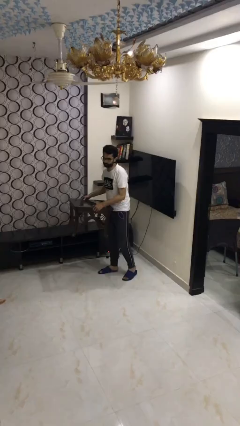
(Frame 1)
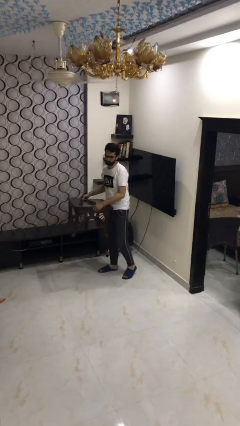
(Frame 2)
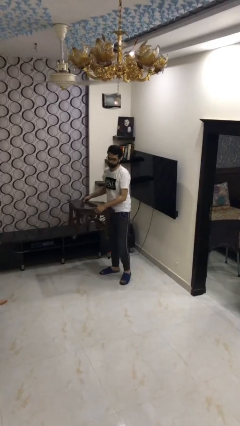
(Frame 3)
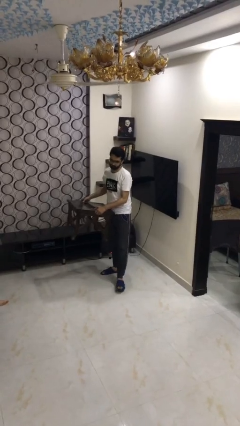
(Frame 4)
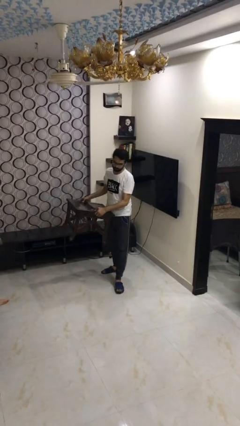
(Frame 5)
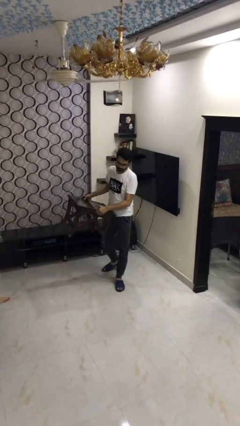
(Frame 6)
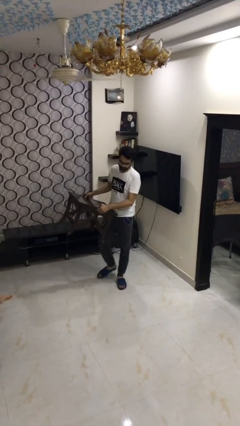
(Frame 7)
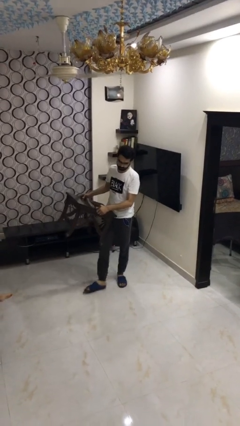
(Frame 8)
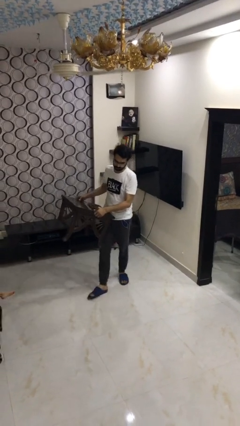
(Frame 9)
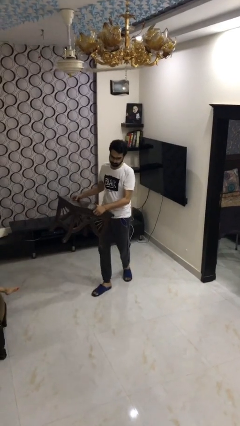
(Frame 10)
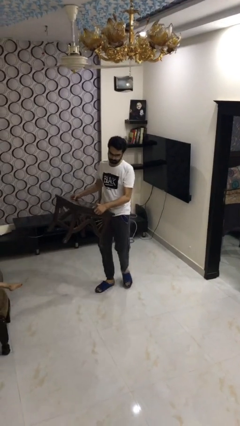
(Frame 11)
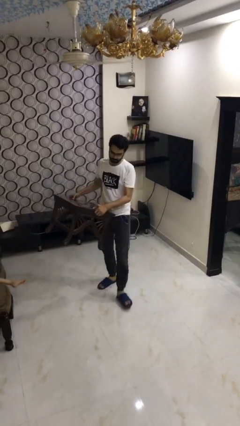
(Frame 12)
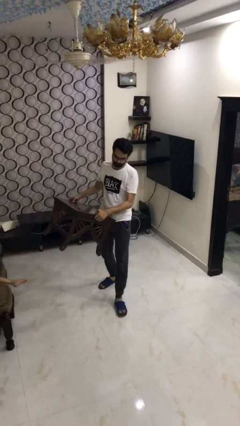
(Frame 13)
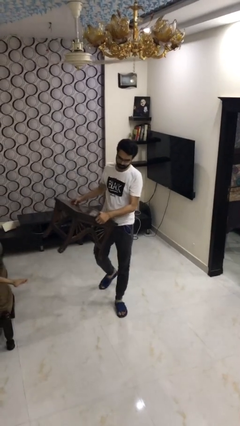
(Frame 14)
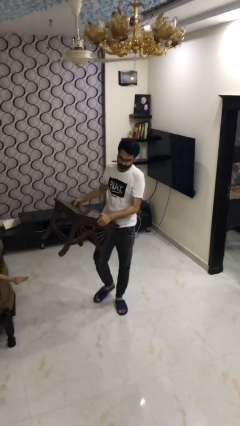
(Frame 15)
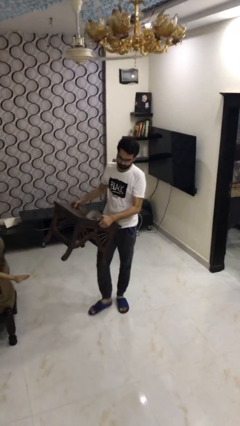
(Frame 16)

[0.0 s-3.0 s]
person carries heavy object

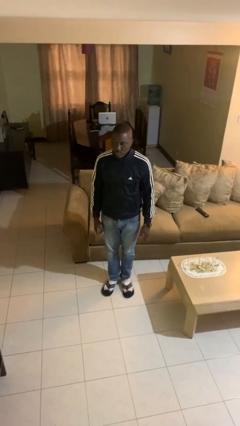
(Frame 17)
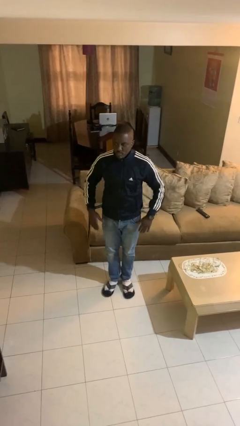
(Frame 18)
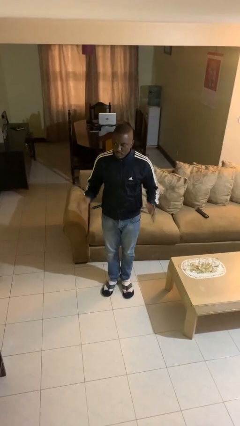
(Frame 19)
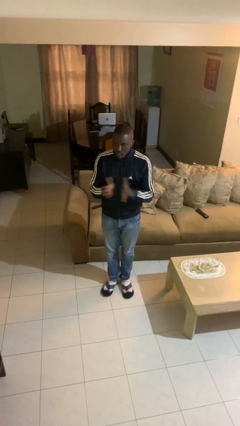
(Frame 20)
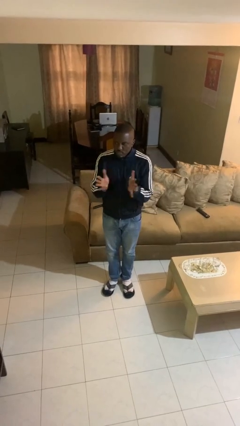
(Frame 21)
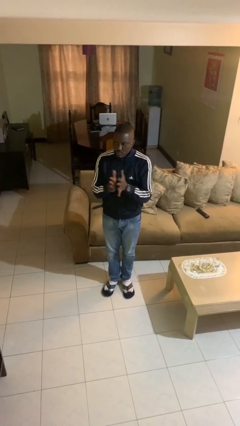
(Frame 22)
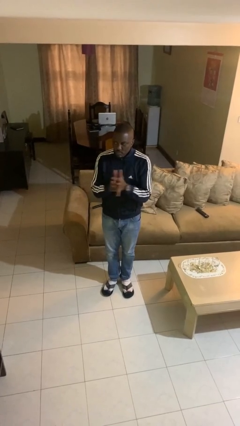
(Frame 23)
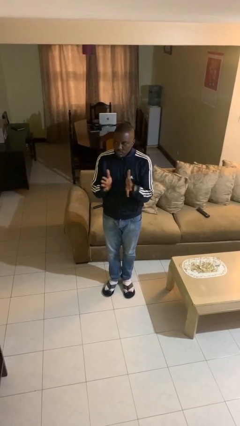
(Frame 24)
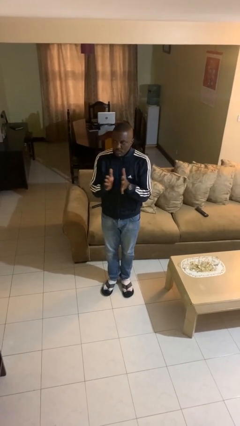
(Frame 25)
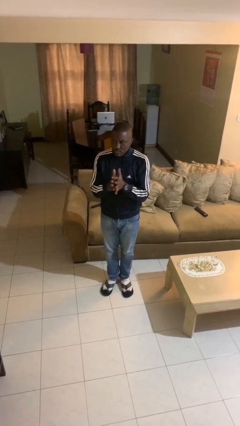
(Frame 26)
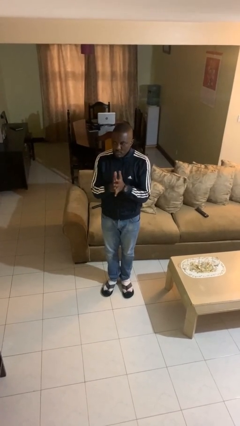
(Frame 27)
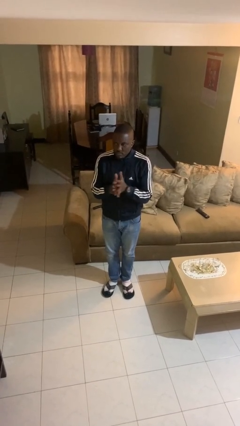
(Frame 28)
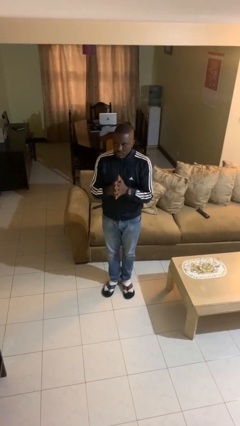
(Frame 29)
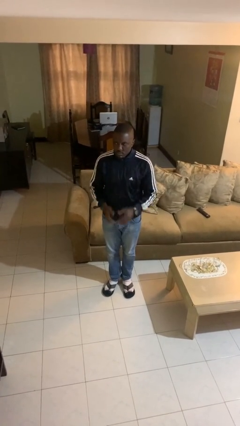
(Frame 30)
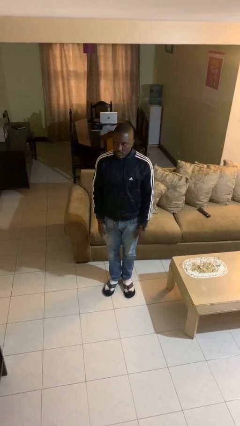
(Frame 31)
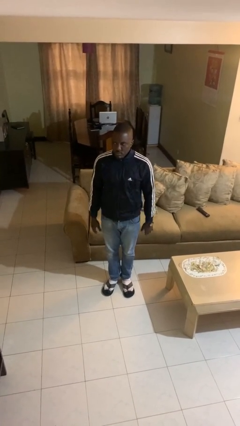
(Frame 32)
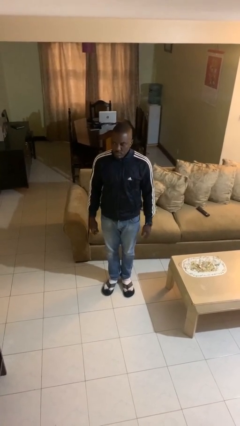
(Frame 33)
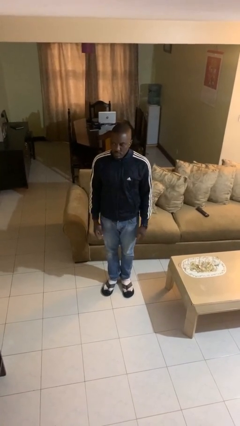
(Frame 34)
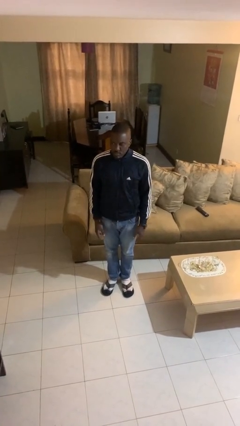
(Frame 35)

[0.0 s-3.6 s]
person claps hands

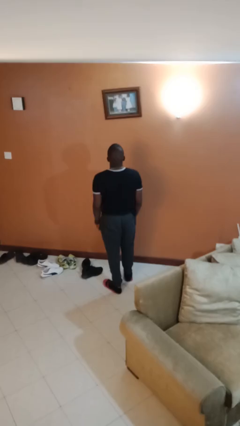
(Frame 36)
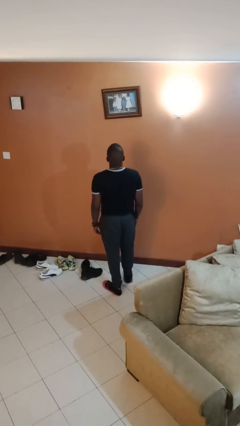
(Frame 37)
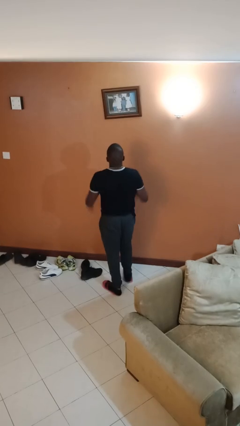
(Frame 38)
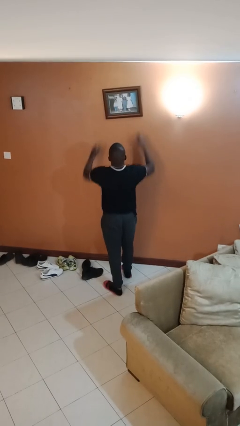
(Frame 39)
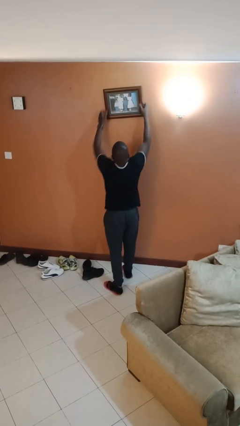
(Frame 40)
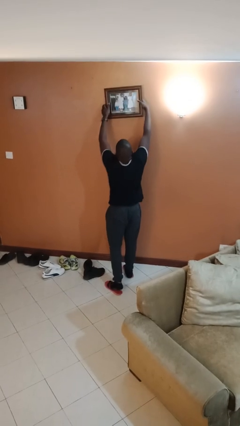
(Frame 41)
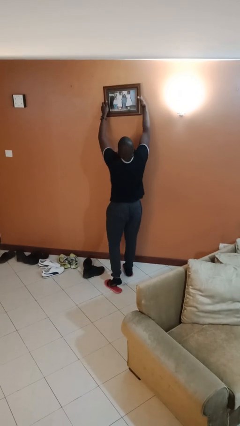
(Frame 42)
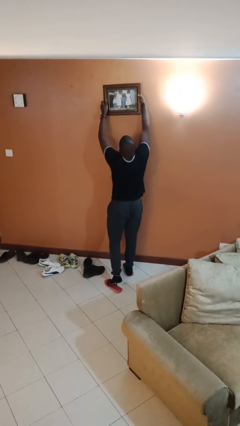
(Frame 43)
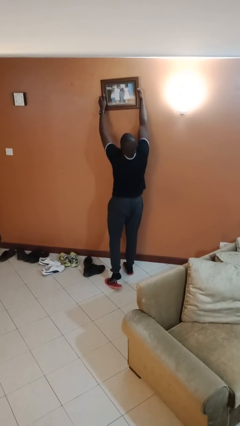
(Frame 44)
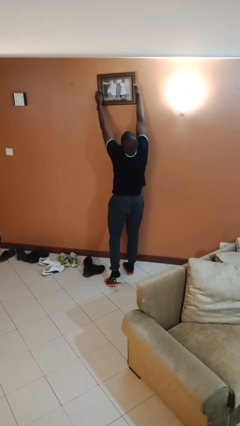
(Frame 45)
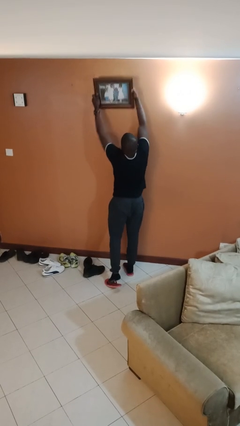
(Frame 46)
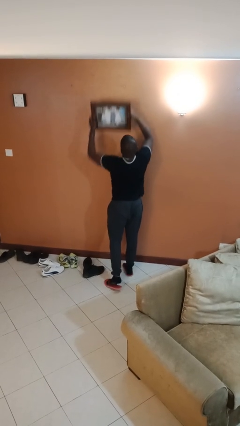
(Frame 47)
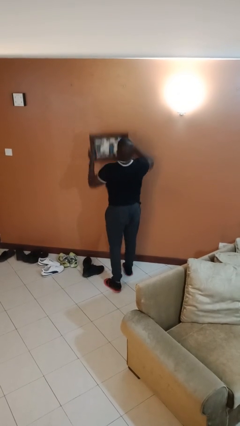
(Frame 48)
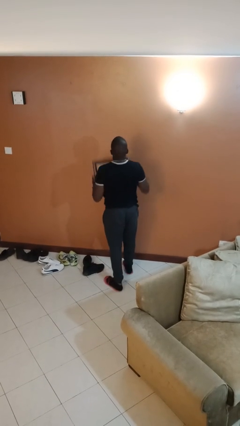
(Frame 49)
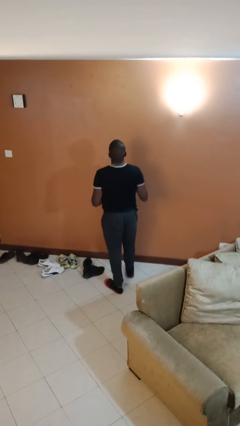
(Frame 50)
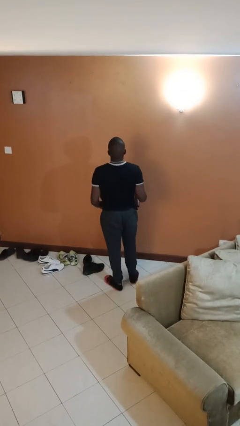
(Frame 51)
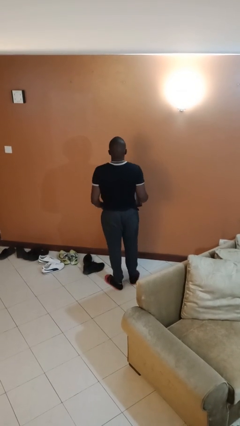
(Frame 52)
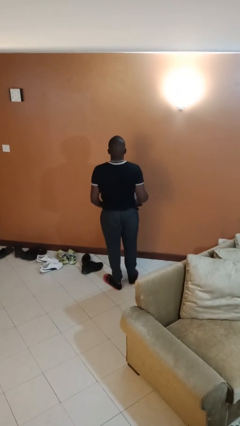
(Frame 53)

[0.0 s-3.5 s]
person takes down picture frame

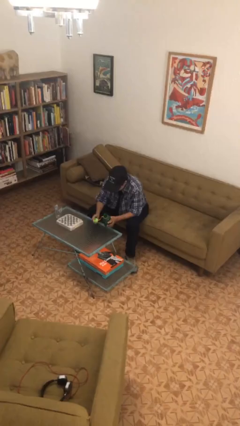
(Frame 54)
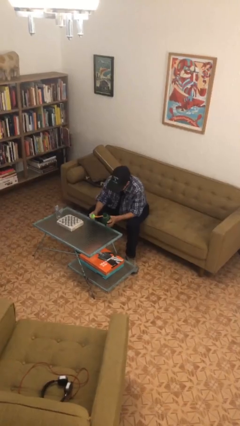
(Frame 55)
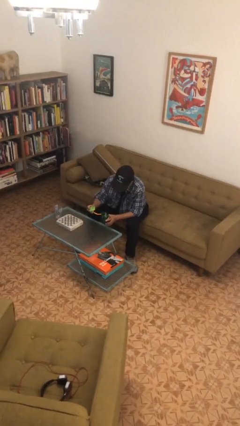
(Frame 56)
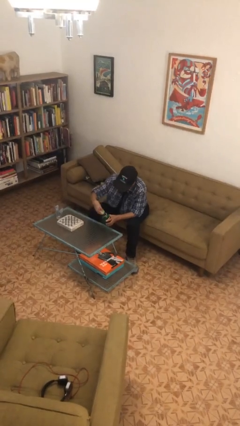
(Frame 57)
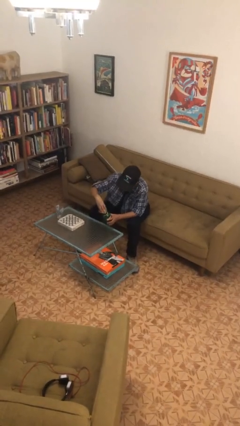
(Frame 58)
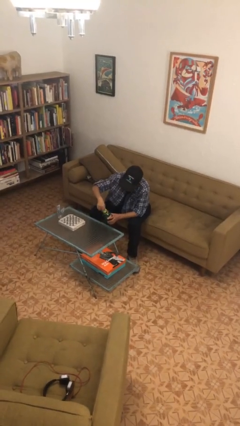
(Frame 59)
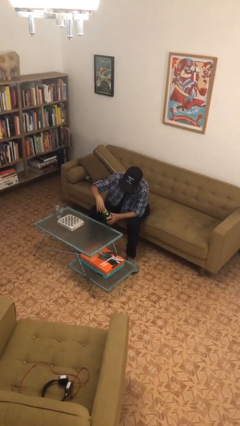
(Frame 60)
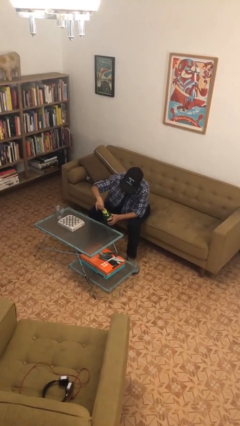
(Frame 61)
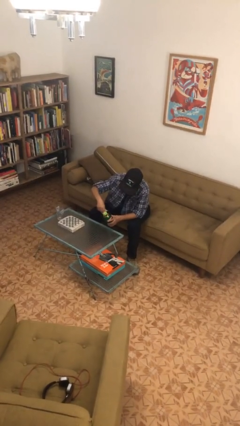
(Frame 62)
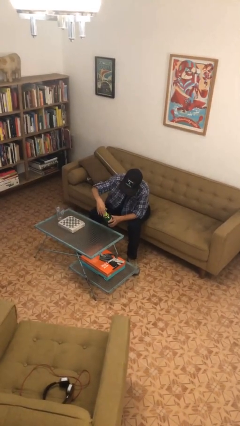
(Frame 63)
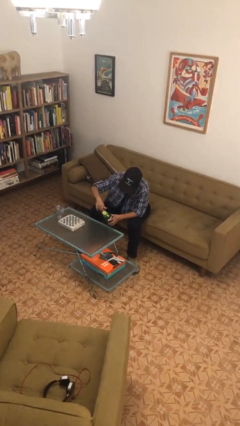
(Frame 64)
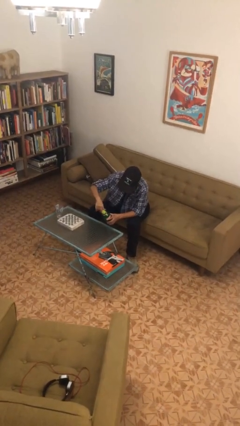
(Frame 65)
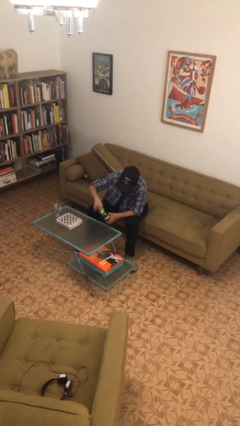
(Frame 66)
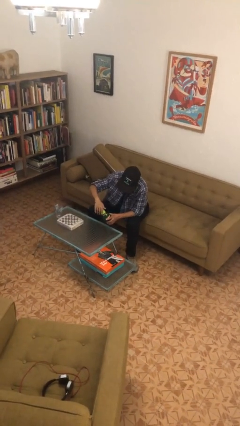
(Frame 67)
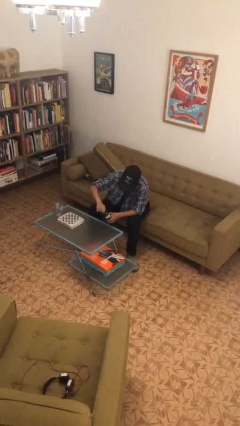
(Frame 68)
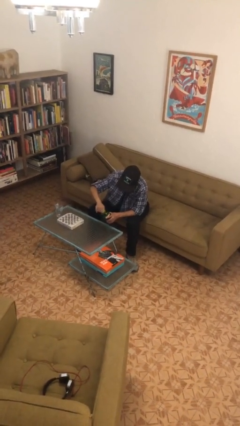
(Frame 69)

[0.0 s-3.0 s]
person screws lid to bottle

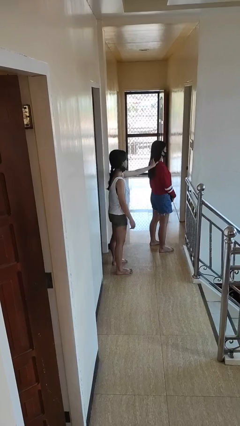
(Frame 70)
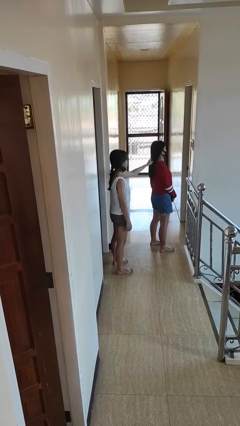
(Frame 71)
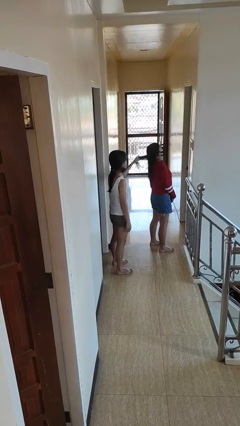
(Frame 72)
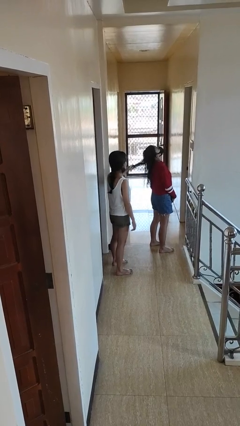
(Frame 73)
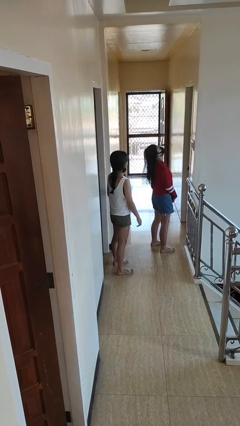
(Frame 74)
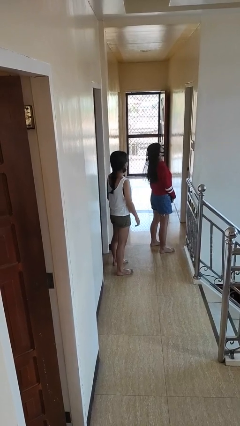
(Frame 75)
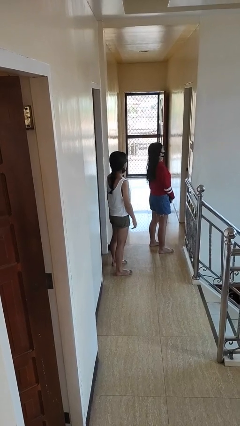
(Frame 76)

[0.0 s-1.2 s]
person grabs person by hair

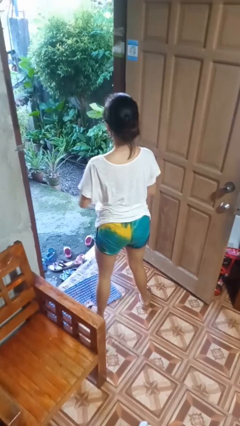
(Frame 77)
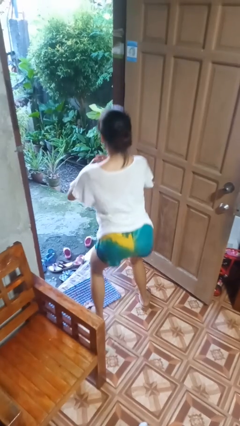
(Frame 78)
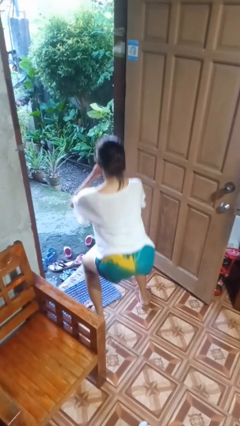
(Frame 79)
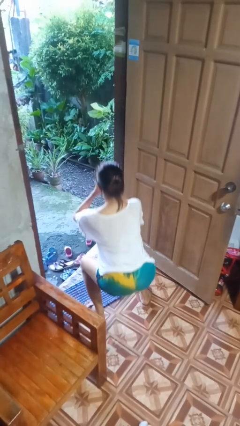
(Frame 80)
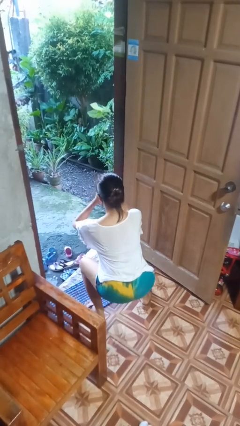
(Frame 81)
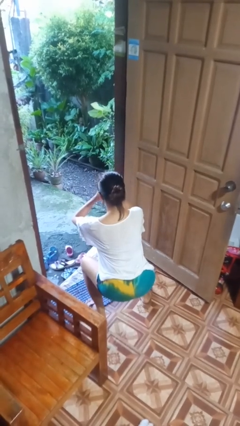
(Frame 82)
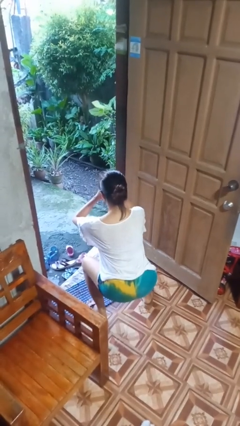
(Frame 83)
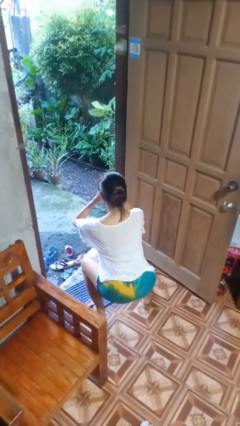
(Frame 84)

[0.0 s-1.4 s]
person squats

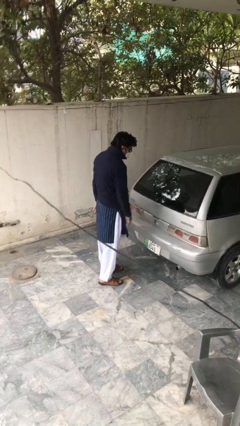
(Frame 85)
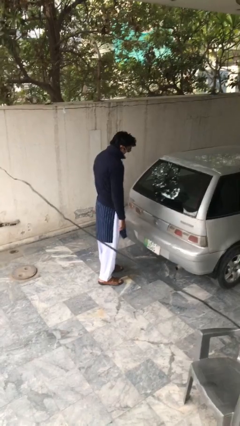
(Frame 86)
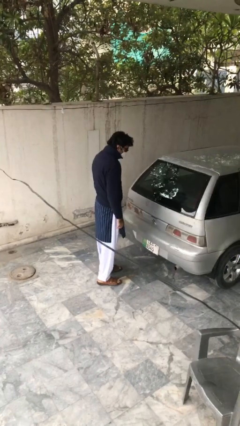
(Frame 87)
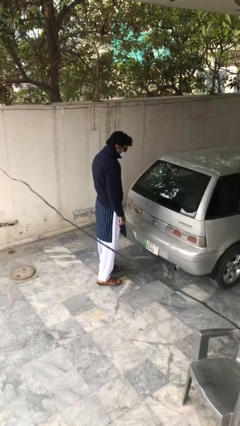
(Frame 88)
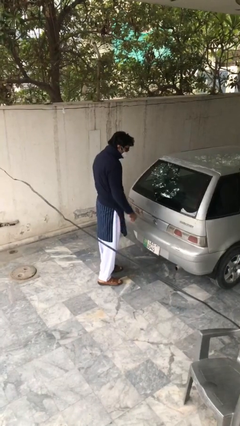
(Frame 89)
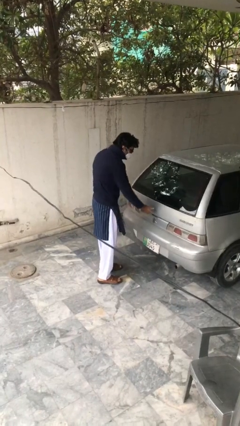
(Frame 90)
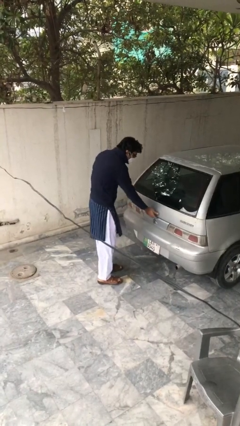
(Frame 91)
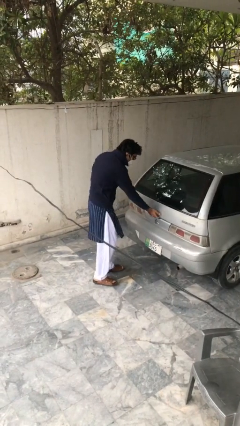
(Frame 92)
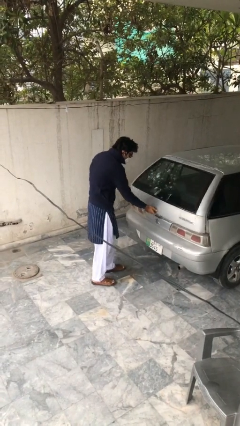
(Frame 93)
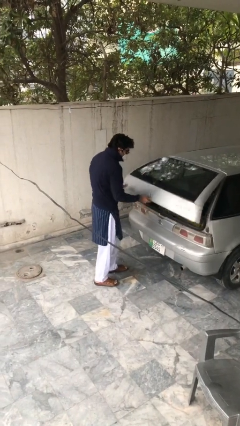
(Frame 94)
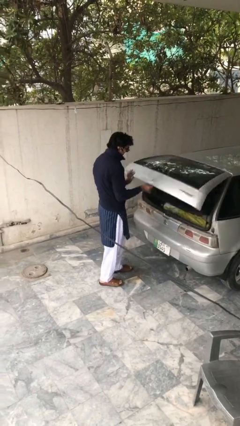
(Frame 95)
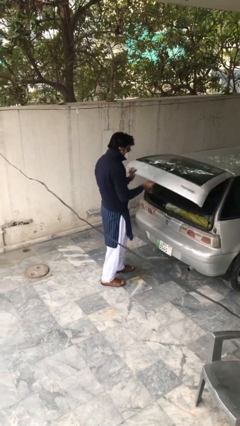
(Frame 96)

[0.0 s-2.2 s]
person opens car trunk
